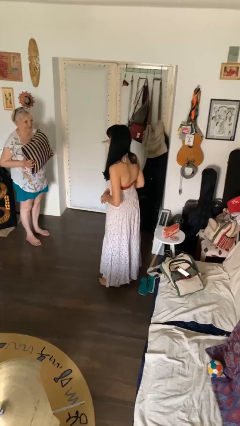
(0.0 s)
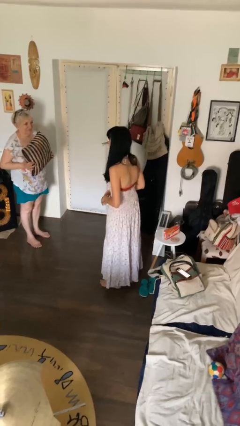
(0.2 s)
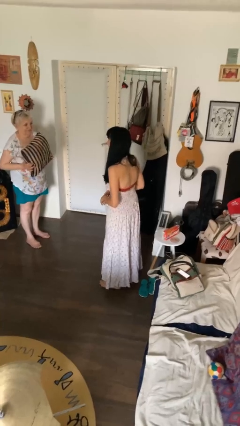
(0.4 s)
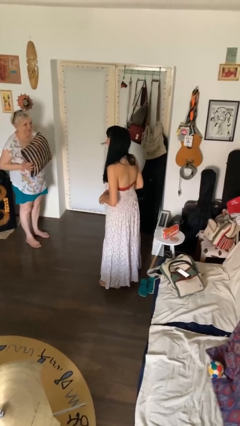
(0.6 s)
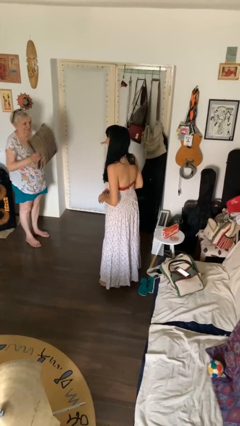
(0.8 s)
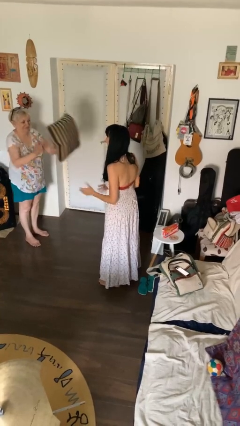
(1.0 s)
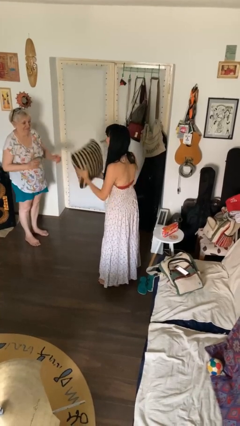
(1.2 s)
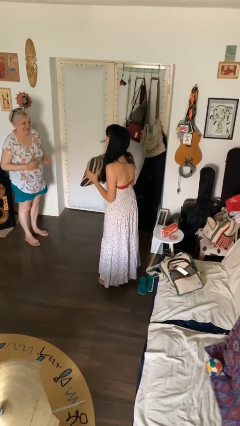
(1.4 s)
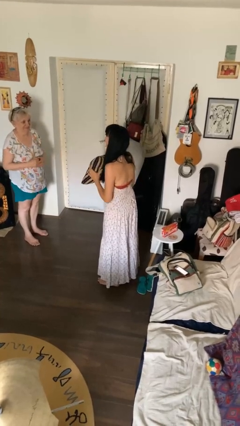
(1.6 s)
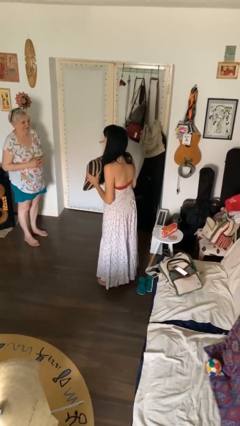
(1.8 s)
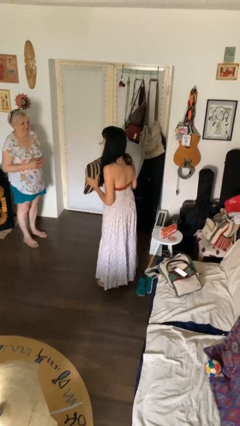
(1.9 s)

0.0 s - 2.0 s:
person catches object from person

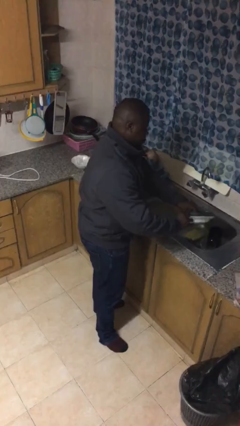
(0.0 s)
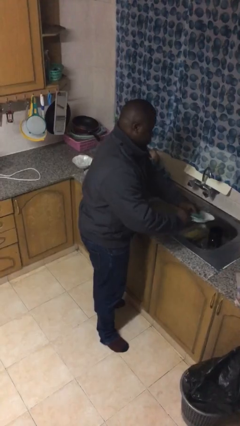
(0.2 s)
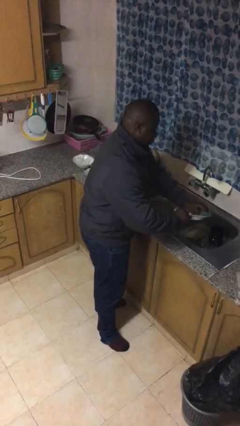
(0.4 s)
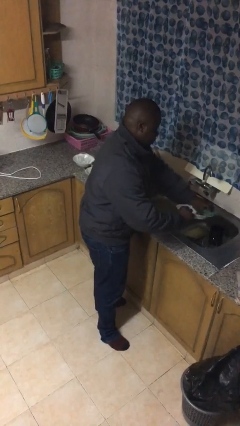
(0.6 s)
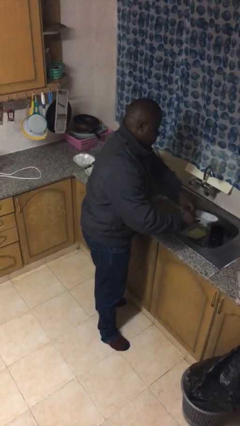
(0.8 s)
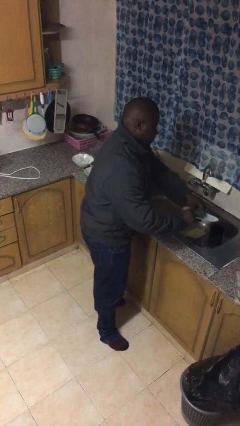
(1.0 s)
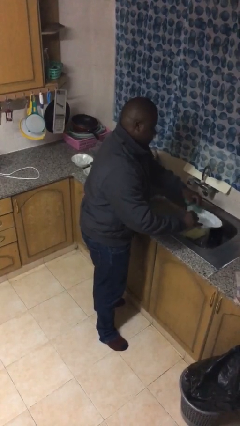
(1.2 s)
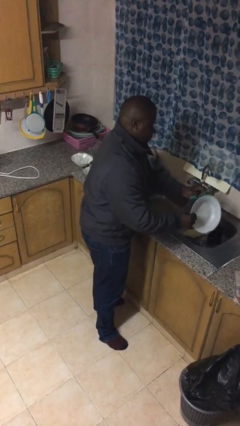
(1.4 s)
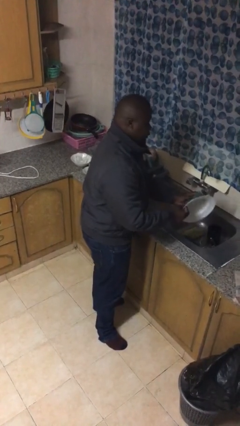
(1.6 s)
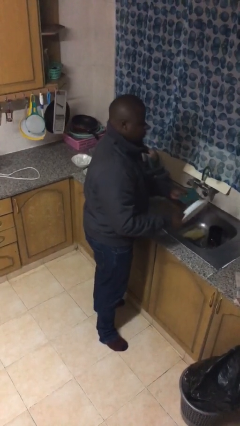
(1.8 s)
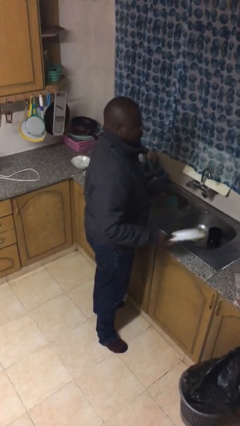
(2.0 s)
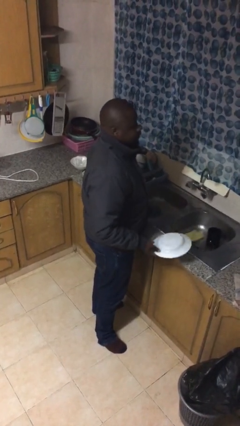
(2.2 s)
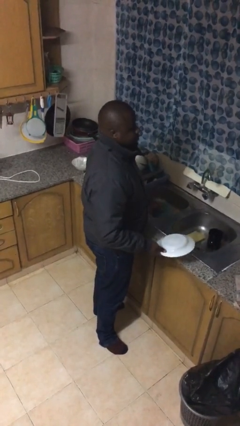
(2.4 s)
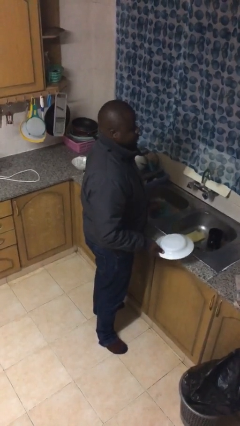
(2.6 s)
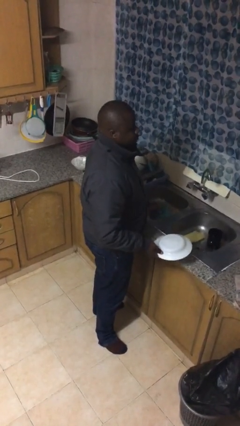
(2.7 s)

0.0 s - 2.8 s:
person washes dish

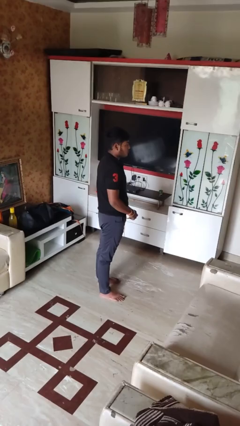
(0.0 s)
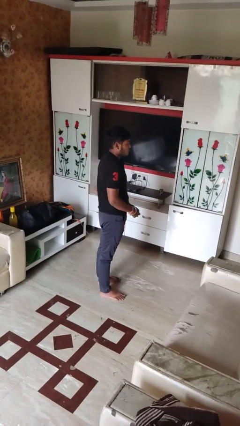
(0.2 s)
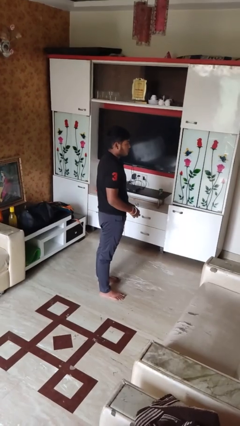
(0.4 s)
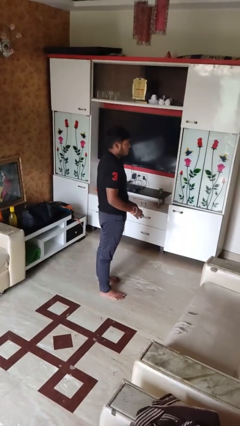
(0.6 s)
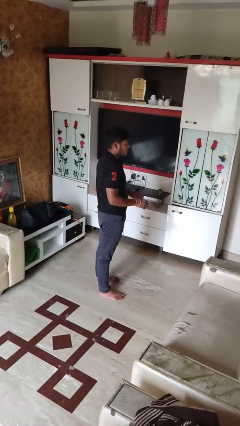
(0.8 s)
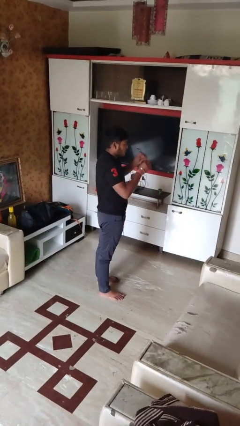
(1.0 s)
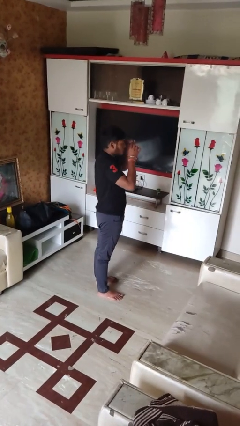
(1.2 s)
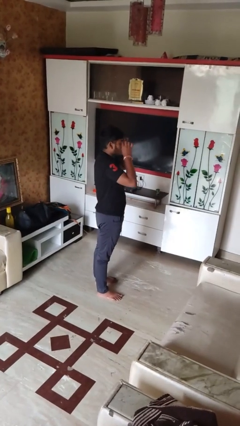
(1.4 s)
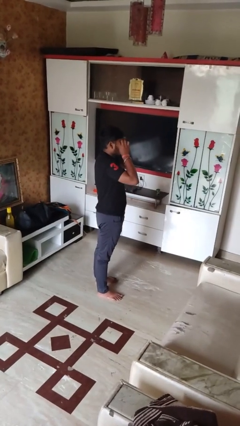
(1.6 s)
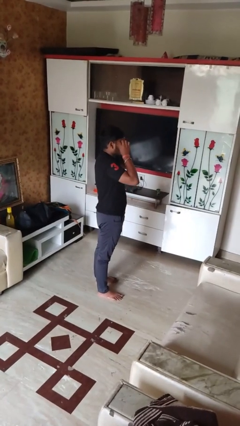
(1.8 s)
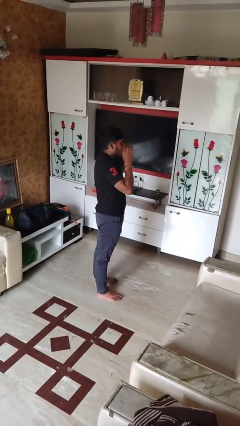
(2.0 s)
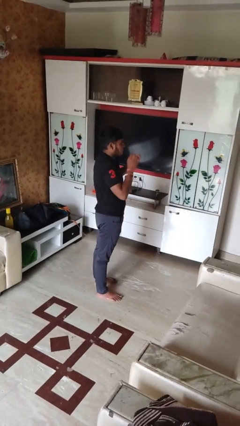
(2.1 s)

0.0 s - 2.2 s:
person puts on sunglasses

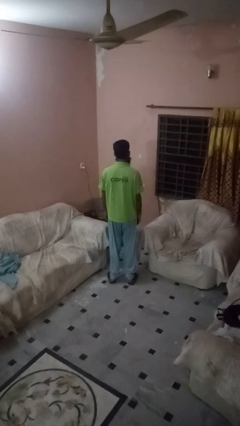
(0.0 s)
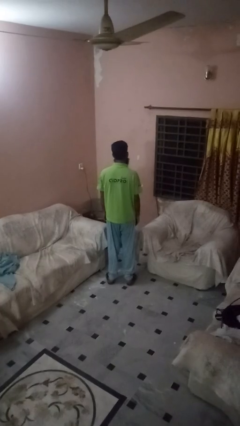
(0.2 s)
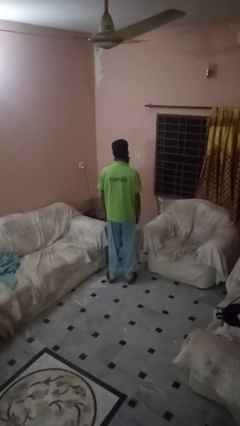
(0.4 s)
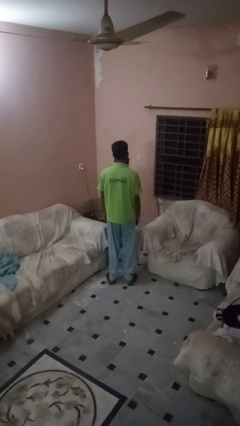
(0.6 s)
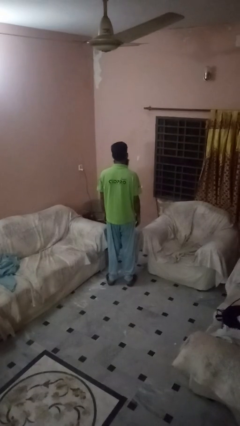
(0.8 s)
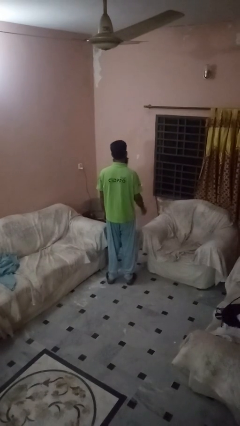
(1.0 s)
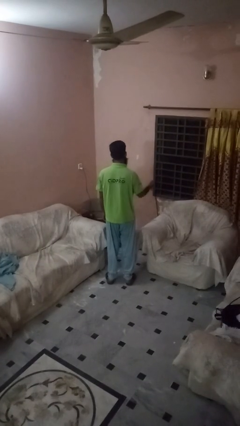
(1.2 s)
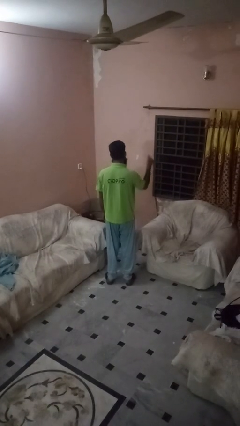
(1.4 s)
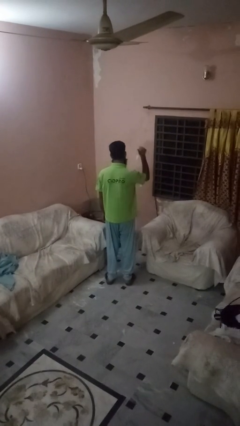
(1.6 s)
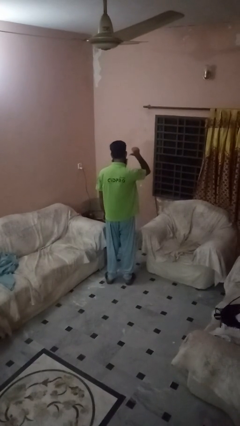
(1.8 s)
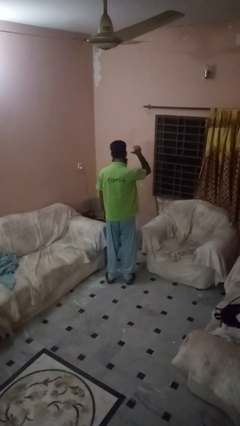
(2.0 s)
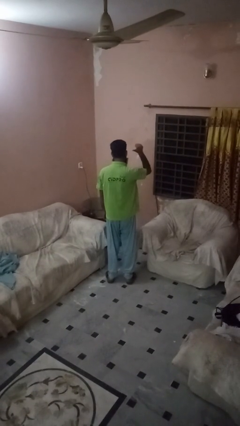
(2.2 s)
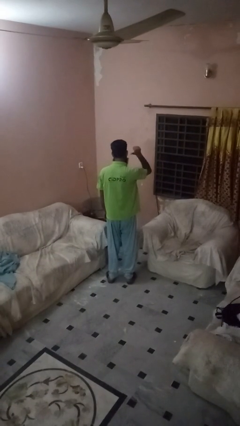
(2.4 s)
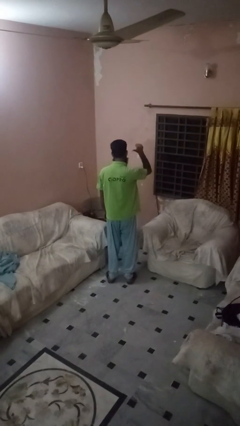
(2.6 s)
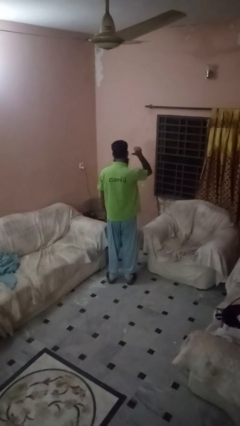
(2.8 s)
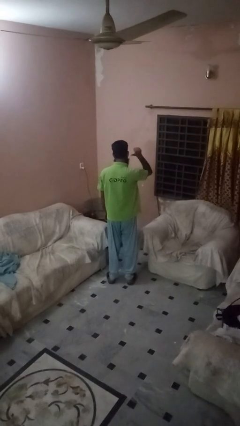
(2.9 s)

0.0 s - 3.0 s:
person gestures behind me

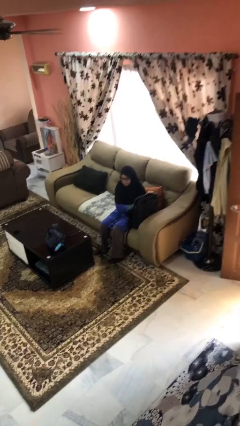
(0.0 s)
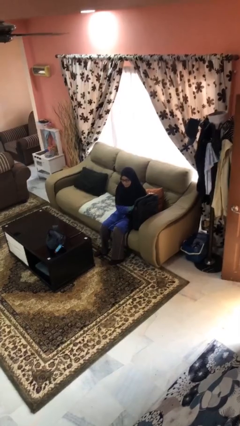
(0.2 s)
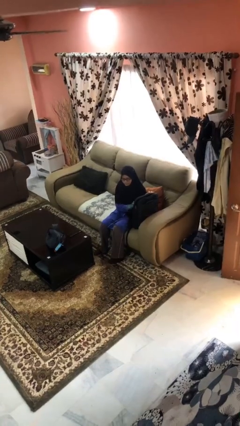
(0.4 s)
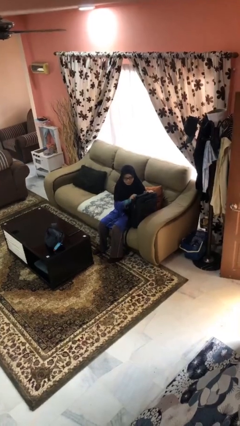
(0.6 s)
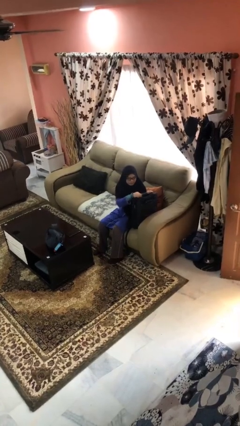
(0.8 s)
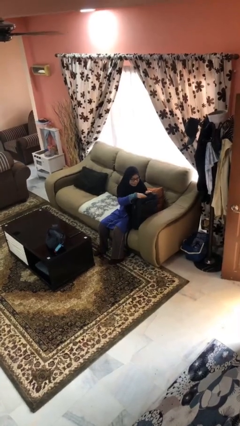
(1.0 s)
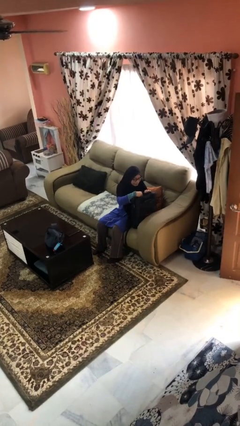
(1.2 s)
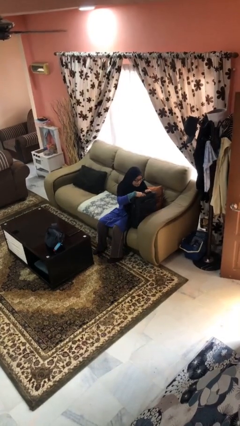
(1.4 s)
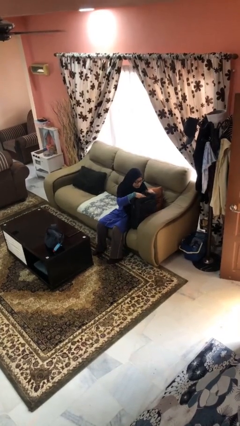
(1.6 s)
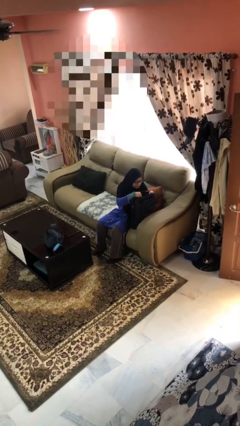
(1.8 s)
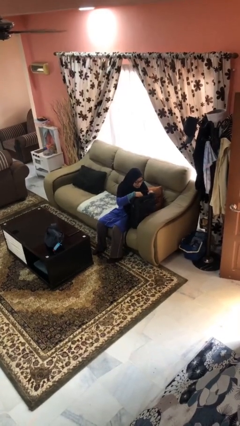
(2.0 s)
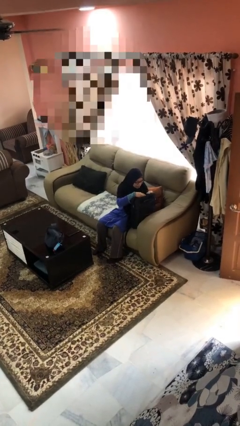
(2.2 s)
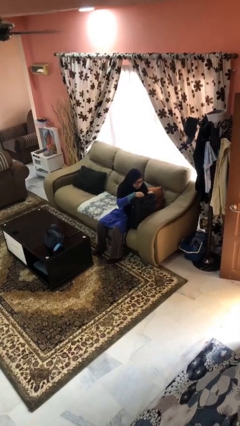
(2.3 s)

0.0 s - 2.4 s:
person searches in backpack

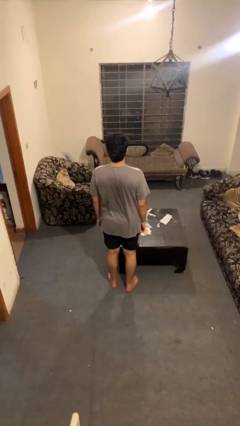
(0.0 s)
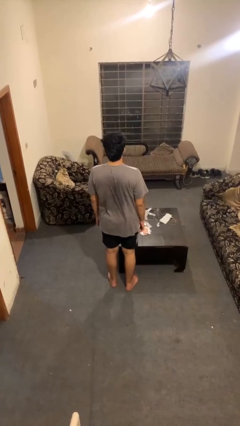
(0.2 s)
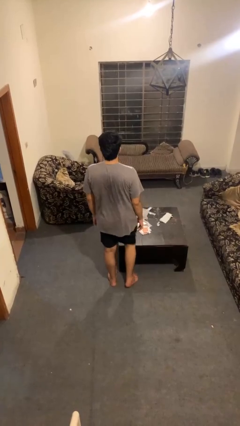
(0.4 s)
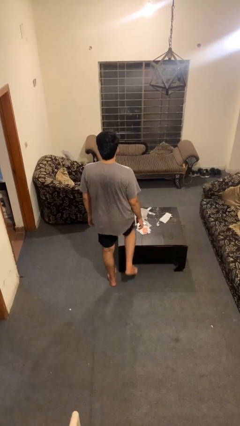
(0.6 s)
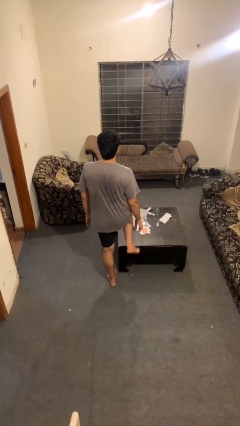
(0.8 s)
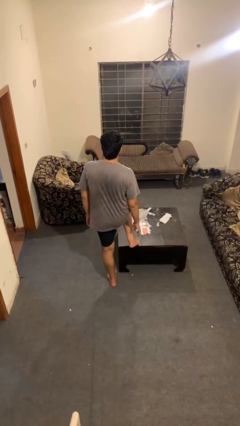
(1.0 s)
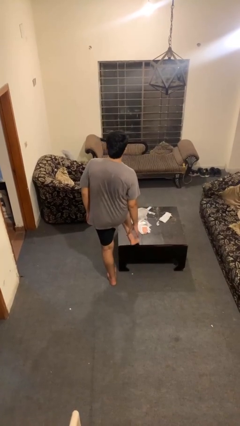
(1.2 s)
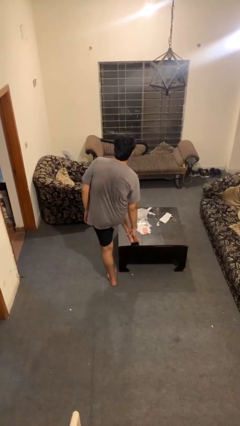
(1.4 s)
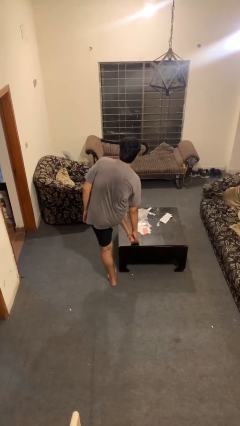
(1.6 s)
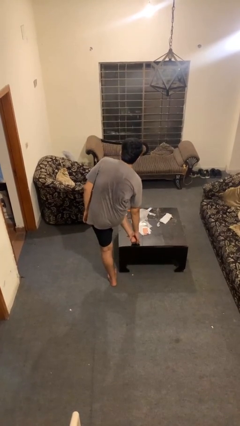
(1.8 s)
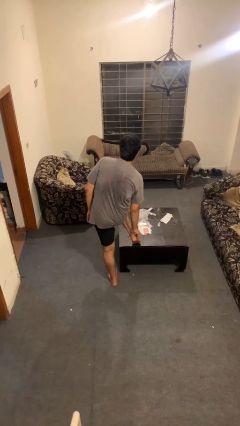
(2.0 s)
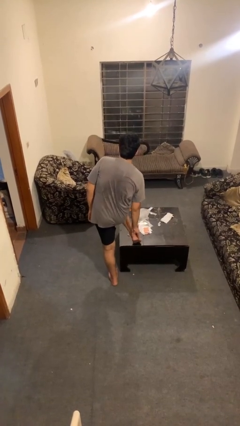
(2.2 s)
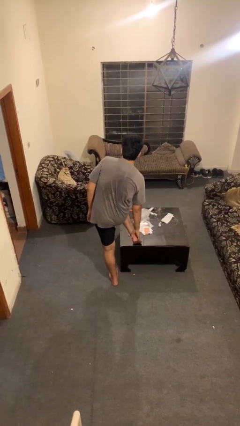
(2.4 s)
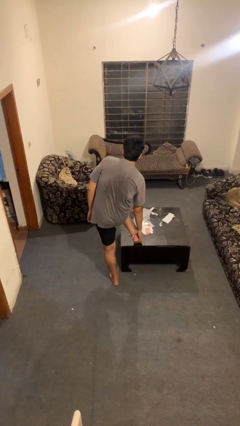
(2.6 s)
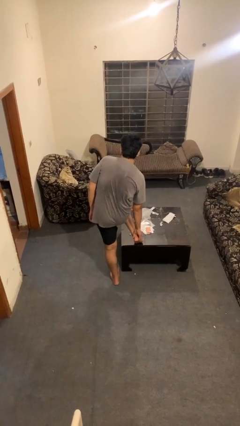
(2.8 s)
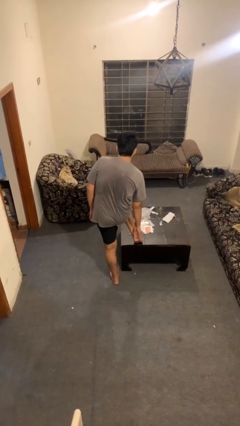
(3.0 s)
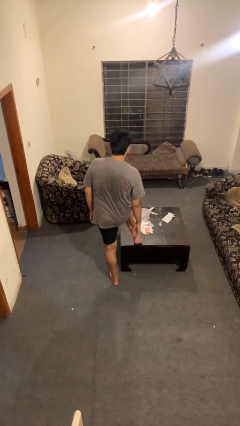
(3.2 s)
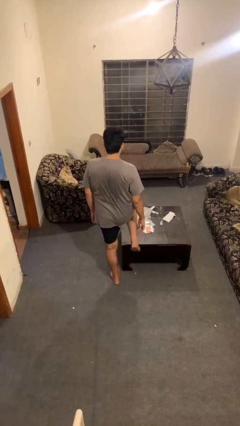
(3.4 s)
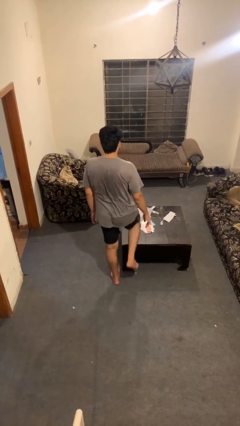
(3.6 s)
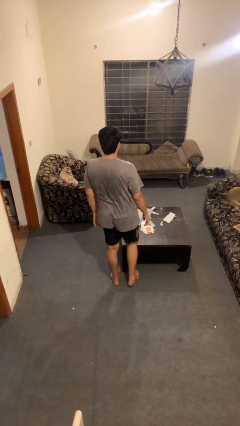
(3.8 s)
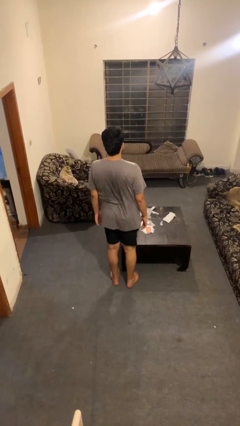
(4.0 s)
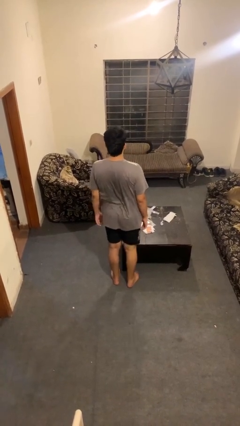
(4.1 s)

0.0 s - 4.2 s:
person rubs foot

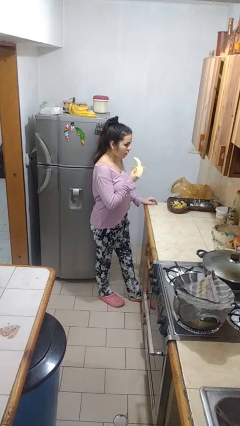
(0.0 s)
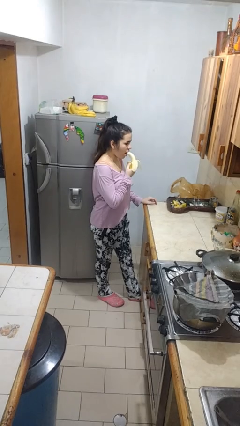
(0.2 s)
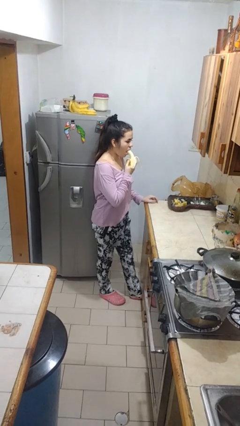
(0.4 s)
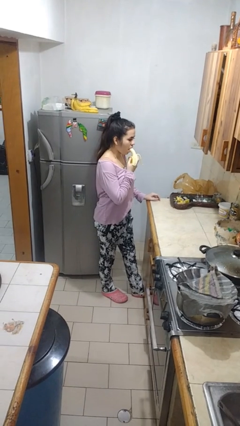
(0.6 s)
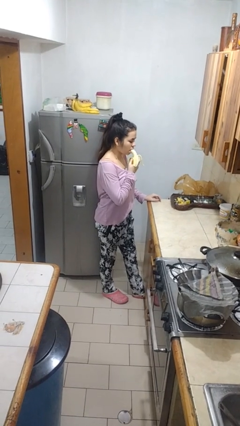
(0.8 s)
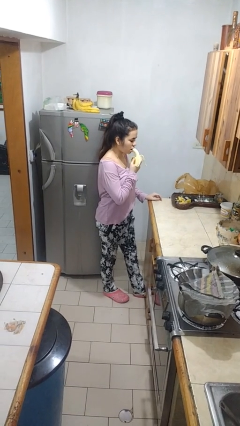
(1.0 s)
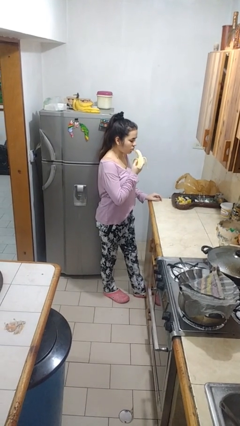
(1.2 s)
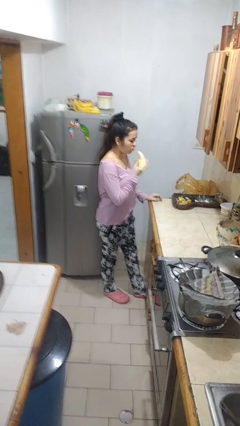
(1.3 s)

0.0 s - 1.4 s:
person eats banana
